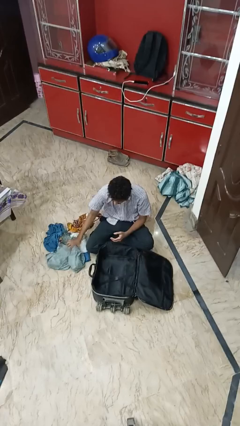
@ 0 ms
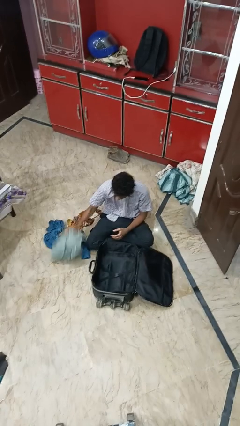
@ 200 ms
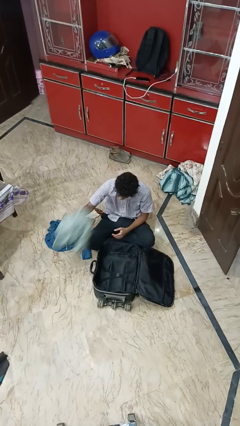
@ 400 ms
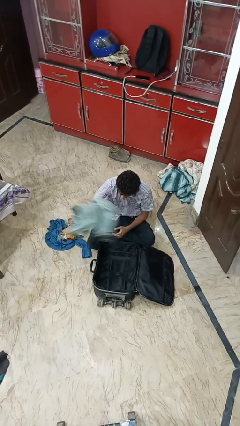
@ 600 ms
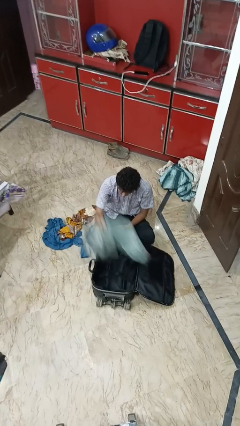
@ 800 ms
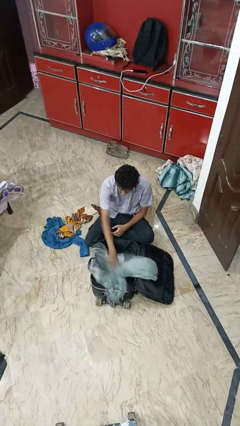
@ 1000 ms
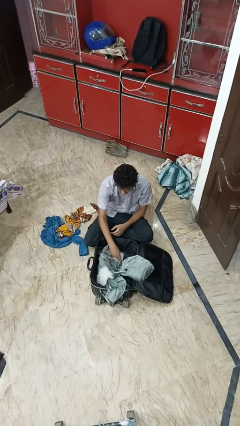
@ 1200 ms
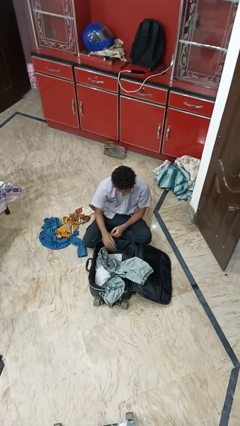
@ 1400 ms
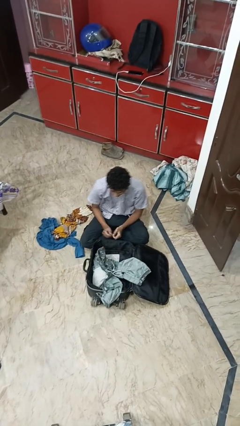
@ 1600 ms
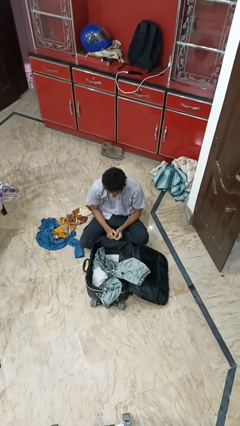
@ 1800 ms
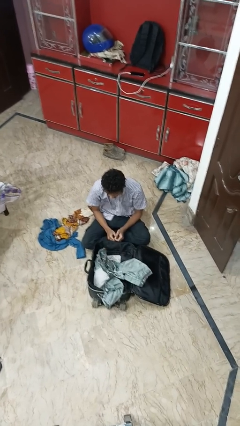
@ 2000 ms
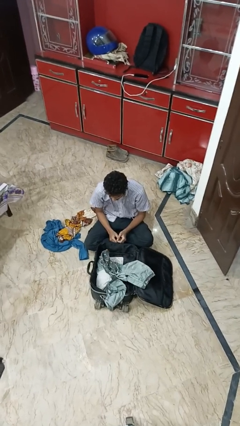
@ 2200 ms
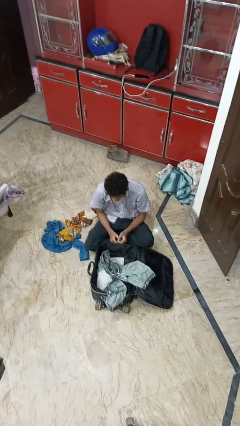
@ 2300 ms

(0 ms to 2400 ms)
person loads clothes into suitcase

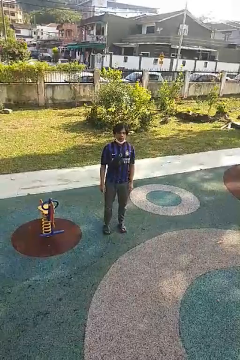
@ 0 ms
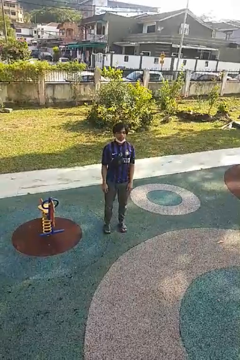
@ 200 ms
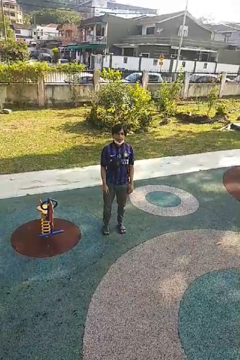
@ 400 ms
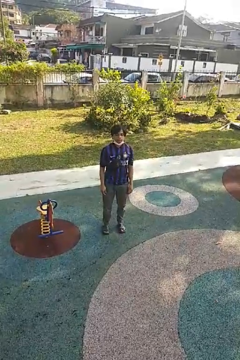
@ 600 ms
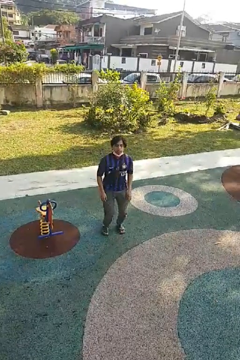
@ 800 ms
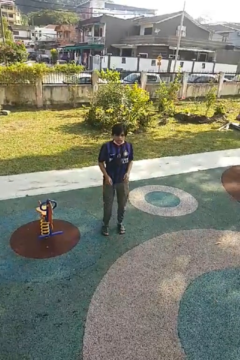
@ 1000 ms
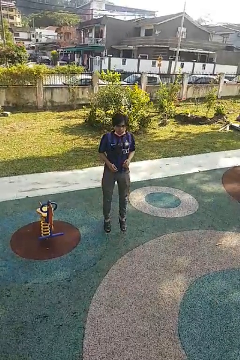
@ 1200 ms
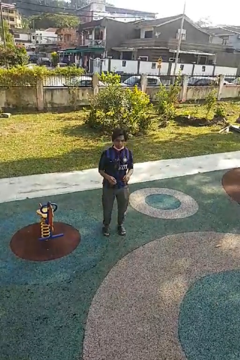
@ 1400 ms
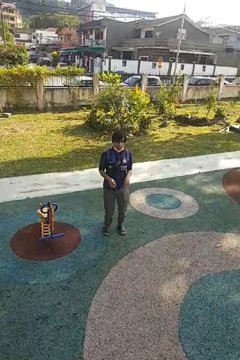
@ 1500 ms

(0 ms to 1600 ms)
person jumps

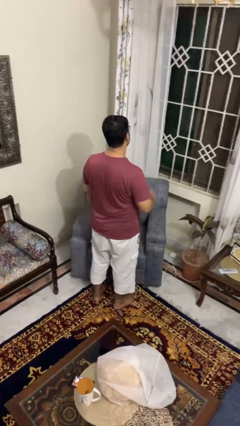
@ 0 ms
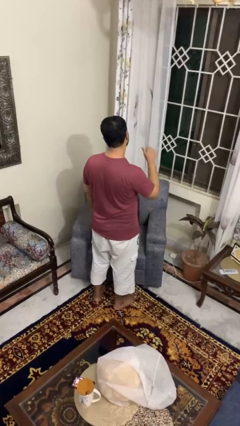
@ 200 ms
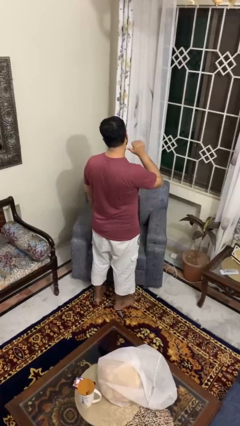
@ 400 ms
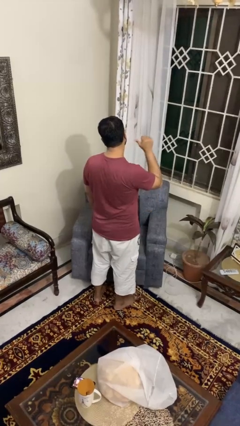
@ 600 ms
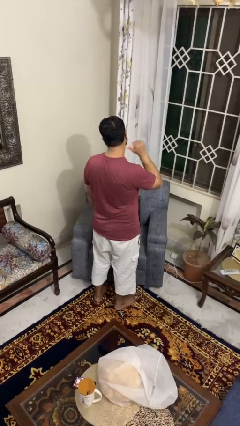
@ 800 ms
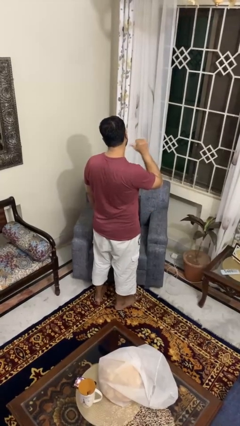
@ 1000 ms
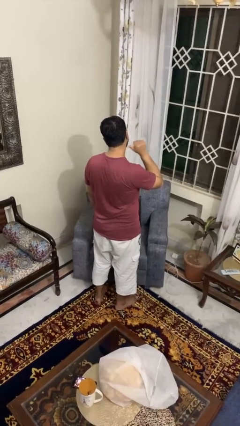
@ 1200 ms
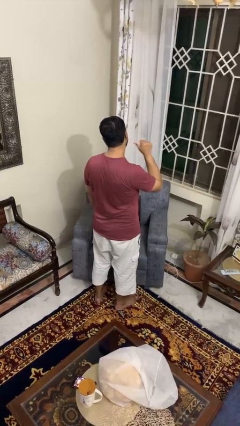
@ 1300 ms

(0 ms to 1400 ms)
person gestures behind me

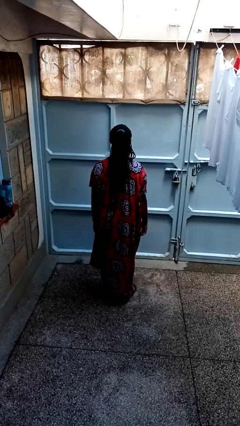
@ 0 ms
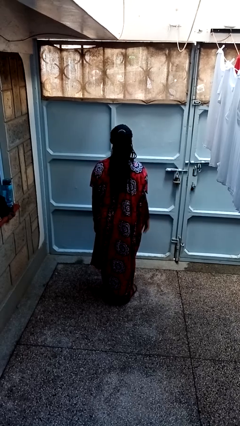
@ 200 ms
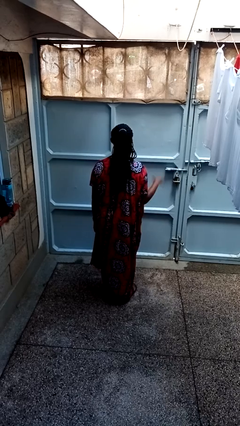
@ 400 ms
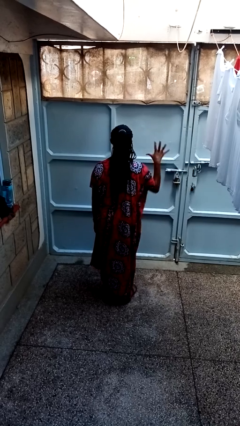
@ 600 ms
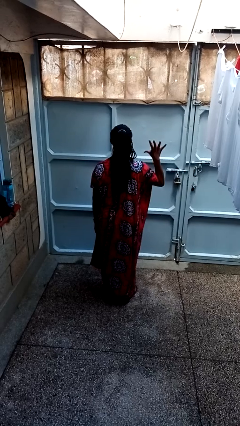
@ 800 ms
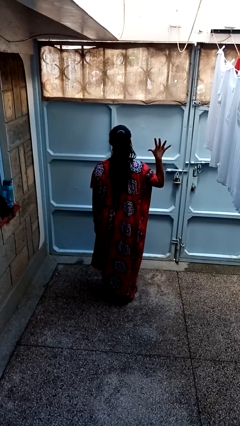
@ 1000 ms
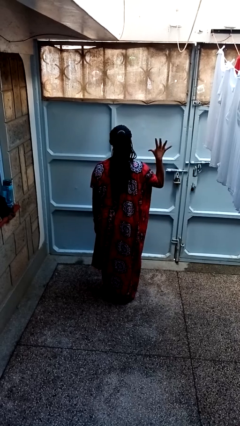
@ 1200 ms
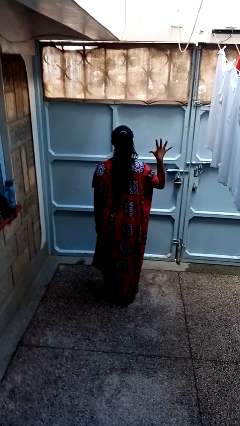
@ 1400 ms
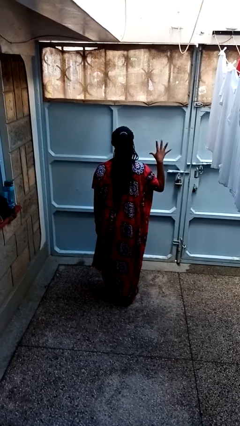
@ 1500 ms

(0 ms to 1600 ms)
person gestures number five

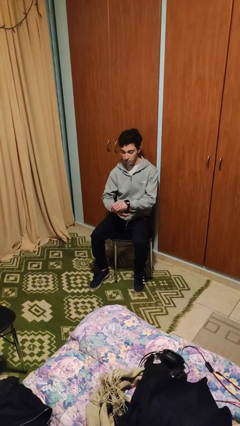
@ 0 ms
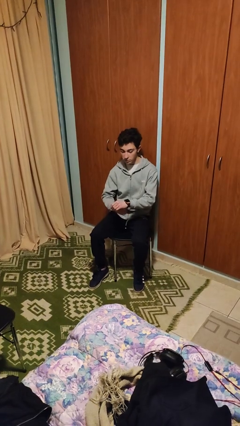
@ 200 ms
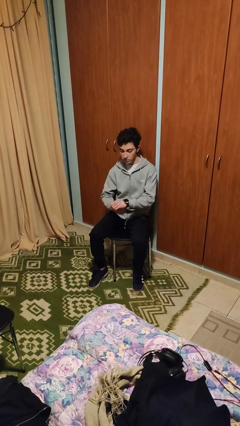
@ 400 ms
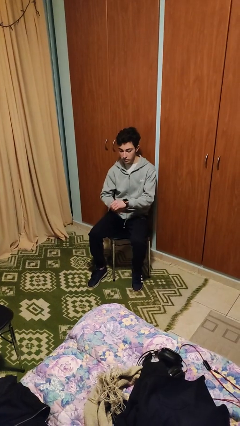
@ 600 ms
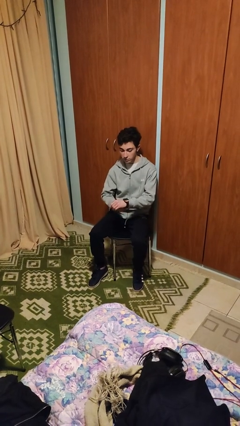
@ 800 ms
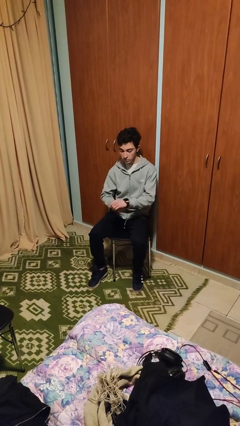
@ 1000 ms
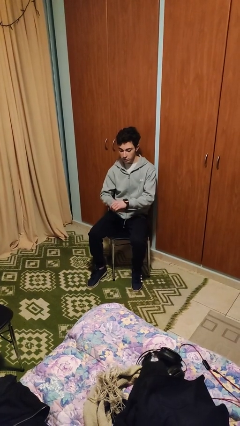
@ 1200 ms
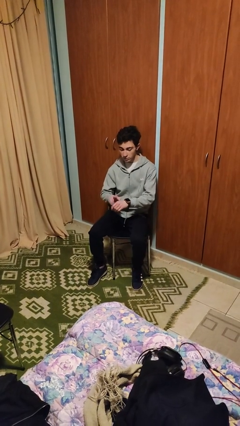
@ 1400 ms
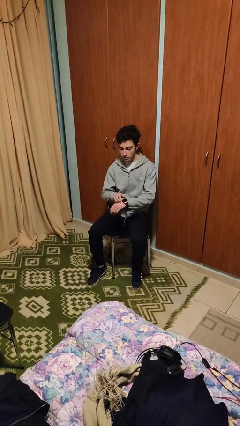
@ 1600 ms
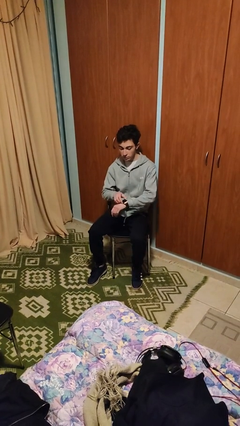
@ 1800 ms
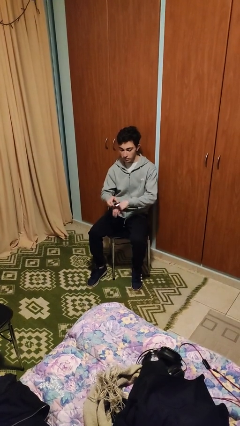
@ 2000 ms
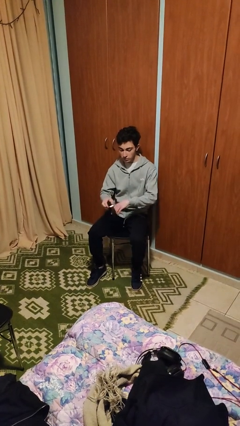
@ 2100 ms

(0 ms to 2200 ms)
person takes off wristwatch

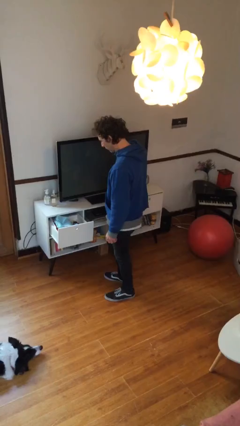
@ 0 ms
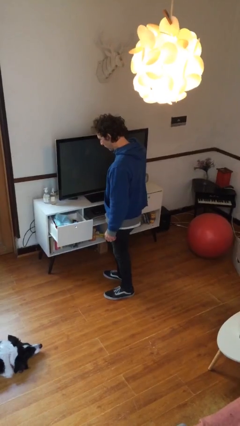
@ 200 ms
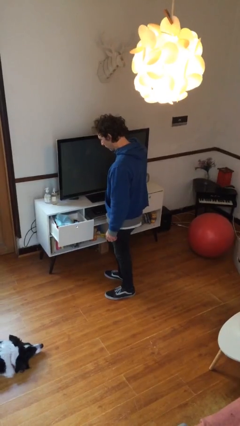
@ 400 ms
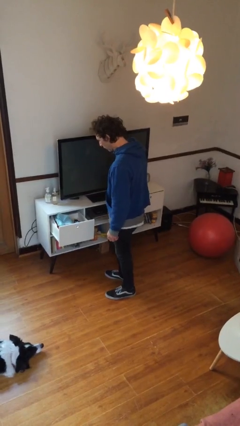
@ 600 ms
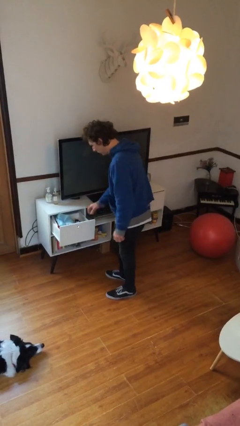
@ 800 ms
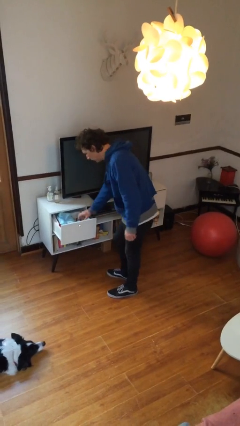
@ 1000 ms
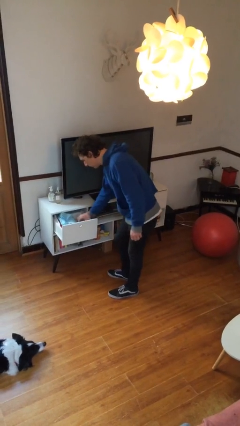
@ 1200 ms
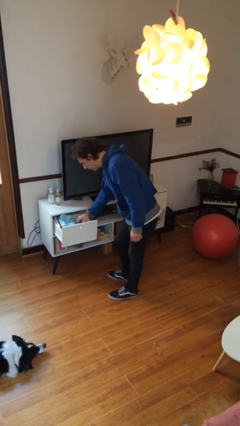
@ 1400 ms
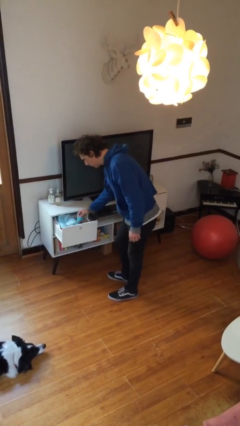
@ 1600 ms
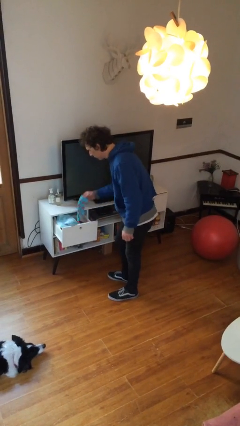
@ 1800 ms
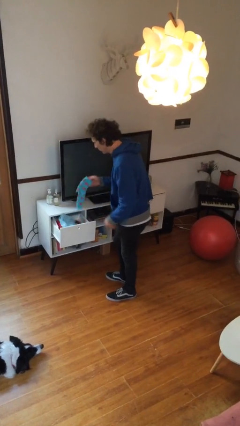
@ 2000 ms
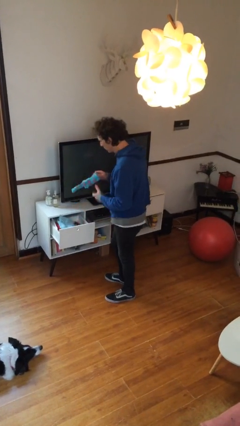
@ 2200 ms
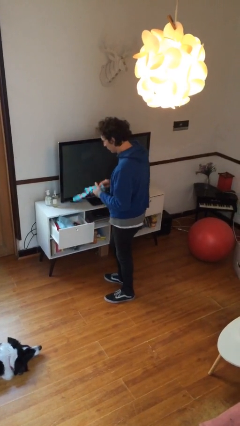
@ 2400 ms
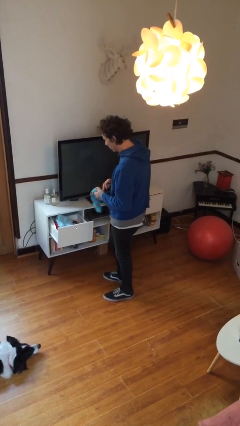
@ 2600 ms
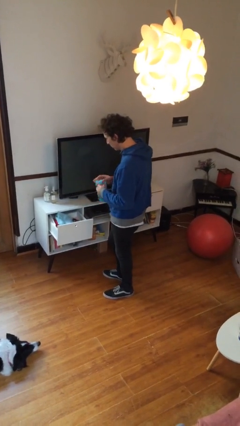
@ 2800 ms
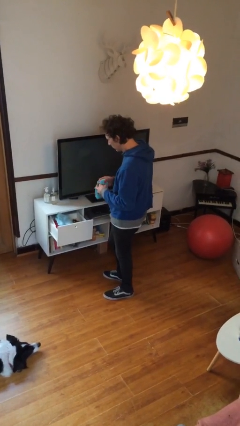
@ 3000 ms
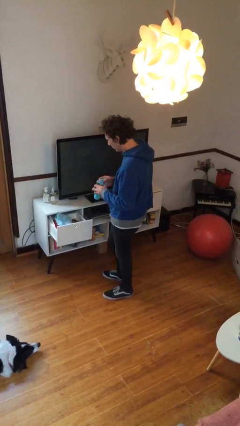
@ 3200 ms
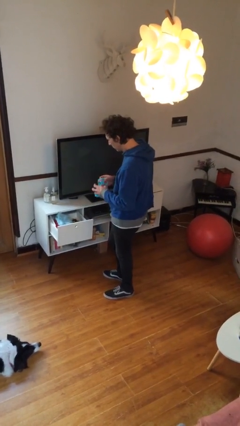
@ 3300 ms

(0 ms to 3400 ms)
person takes clothes from dresser

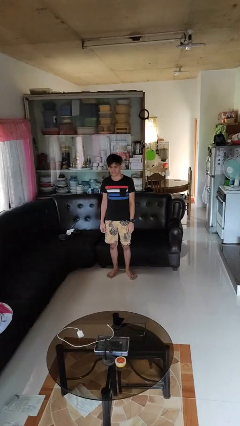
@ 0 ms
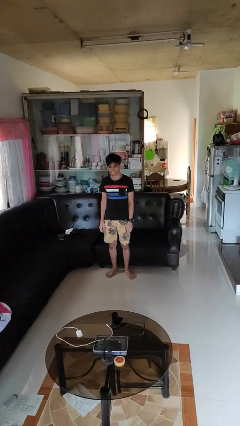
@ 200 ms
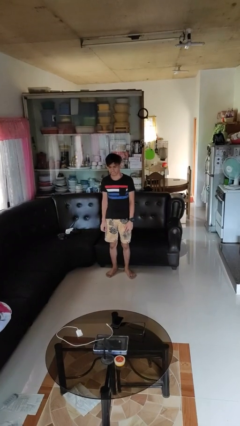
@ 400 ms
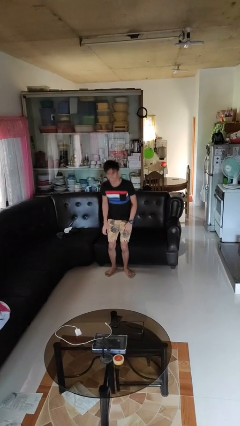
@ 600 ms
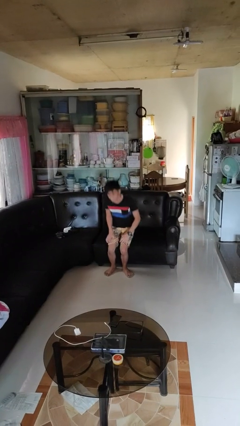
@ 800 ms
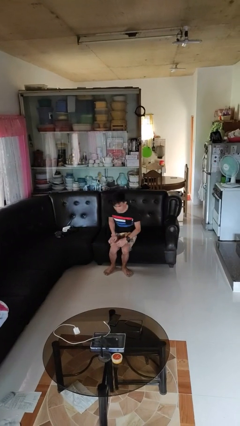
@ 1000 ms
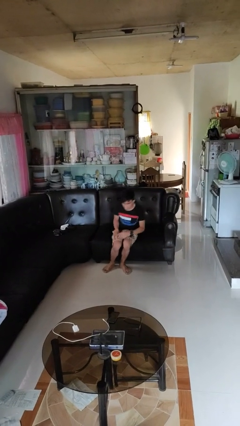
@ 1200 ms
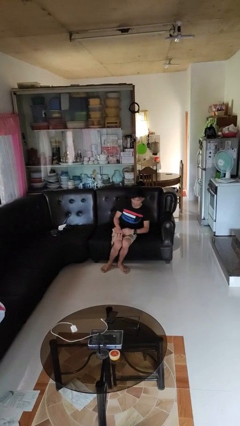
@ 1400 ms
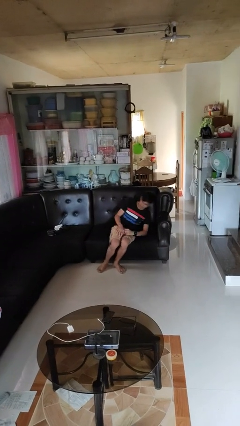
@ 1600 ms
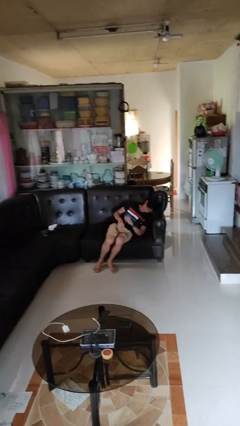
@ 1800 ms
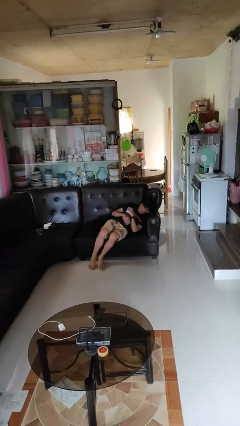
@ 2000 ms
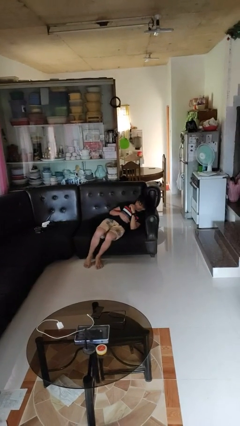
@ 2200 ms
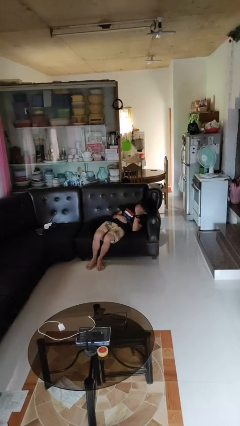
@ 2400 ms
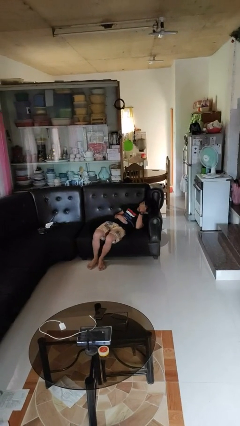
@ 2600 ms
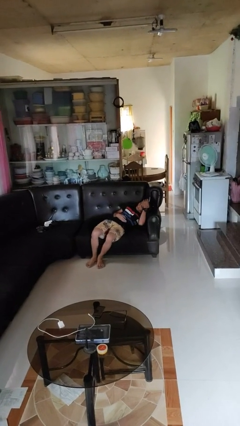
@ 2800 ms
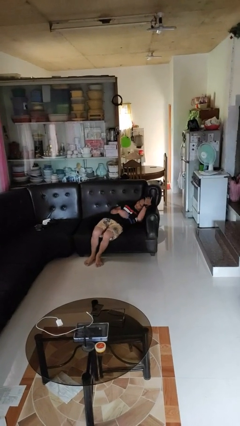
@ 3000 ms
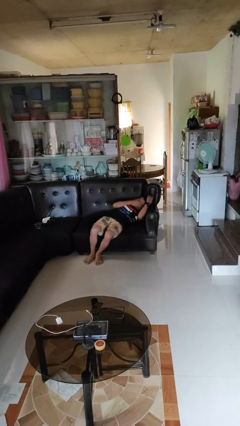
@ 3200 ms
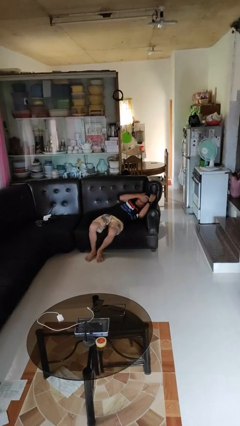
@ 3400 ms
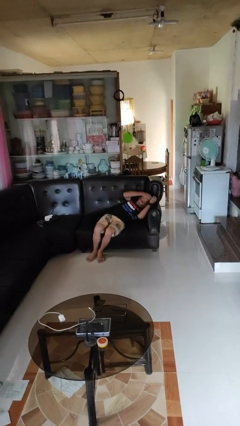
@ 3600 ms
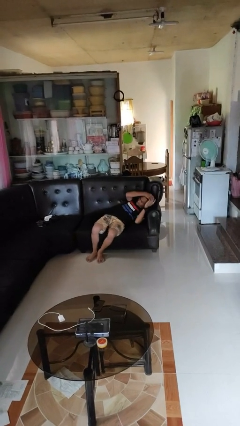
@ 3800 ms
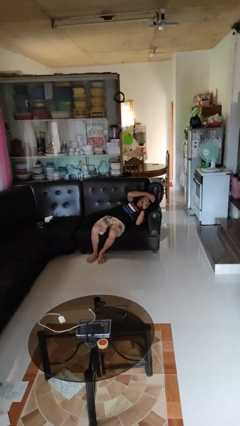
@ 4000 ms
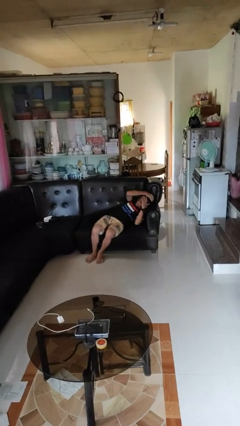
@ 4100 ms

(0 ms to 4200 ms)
person lies down on couch

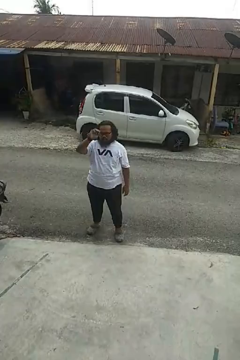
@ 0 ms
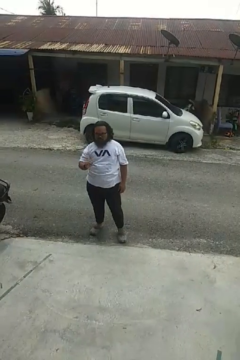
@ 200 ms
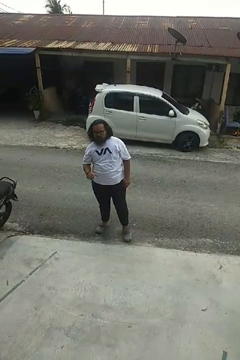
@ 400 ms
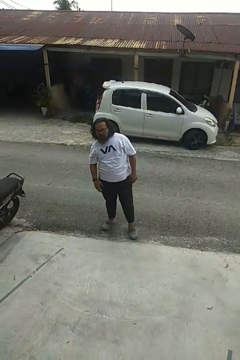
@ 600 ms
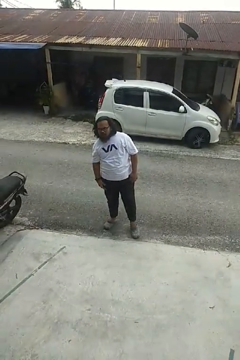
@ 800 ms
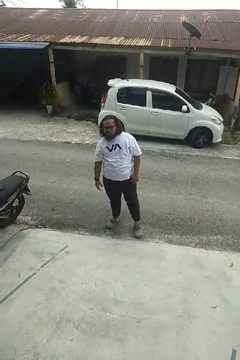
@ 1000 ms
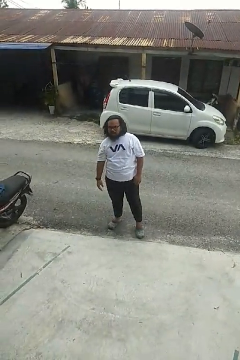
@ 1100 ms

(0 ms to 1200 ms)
person gestures lower hand
